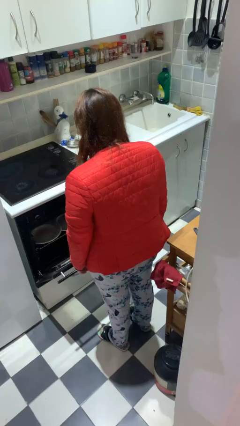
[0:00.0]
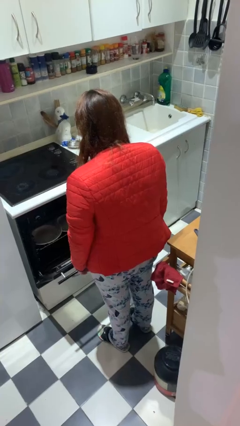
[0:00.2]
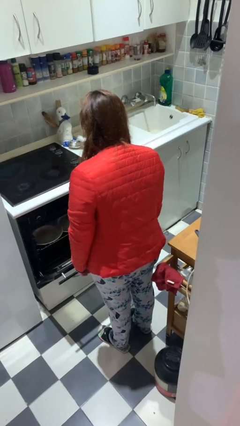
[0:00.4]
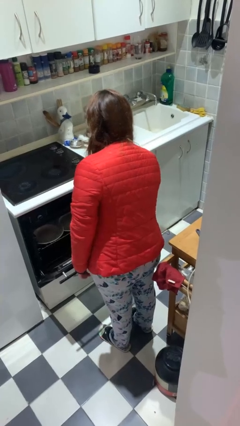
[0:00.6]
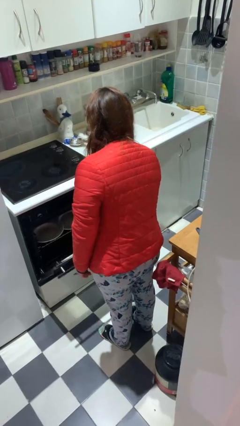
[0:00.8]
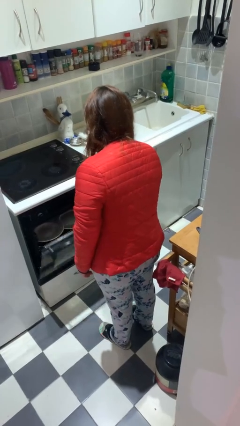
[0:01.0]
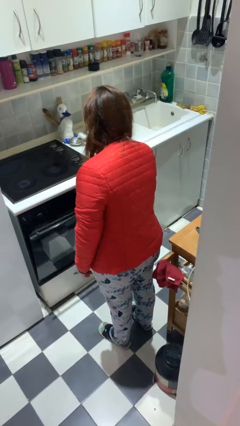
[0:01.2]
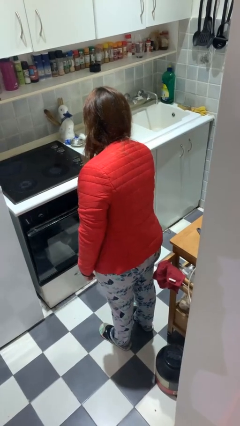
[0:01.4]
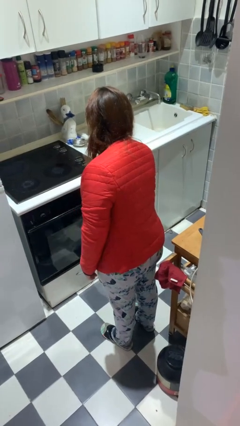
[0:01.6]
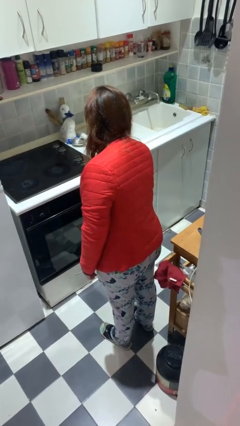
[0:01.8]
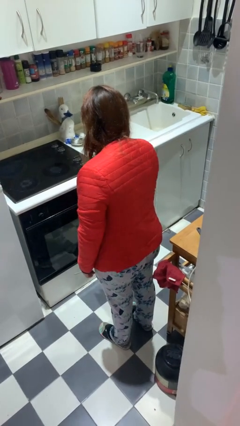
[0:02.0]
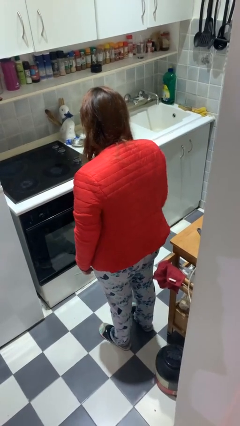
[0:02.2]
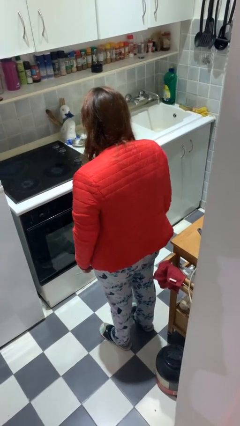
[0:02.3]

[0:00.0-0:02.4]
person closes dishwasher

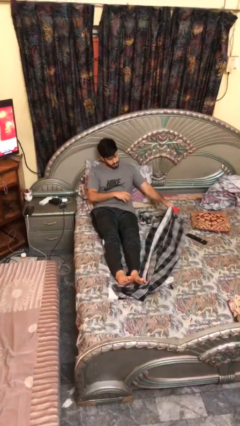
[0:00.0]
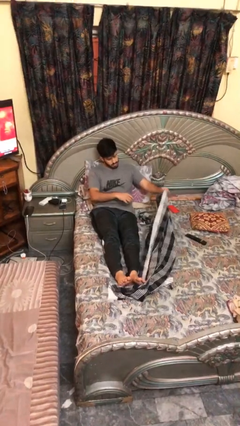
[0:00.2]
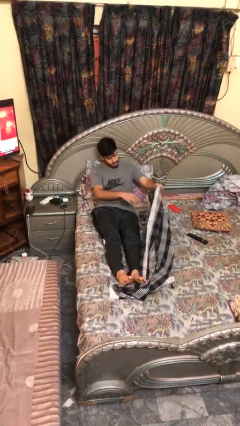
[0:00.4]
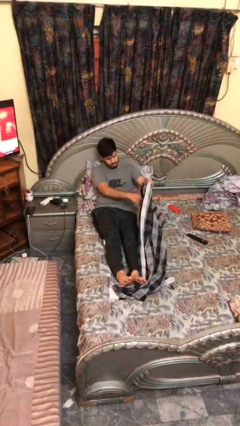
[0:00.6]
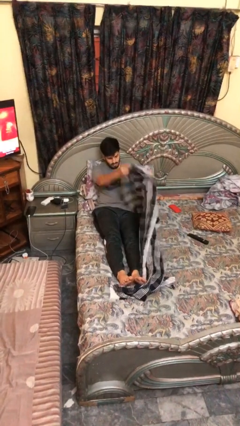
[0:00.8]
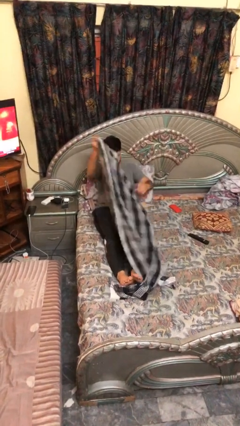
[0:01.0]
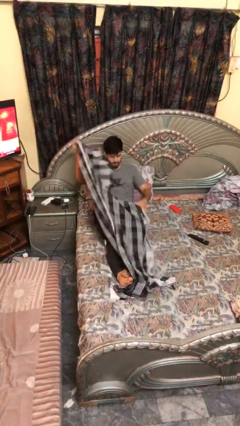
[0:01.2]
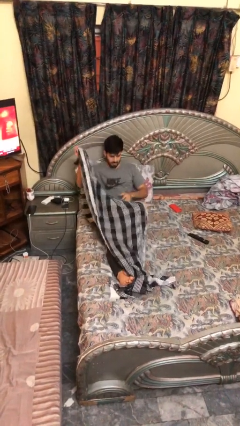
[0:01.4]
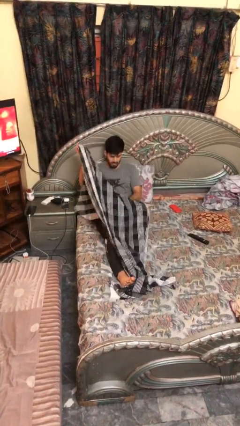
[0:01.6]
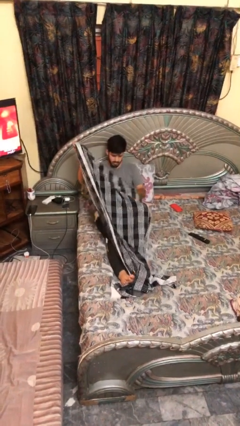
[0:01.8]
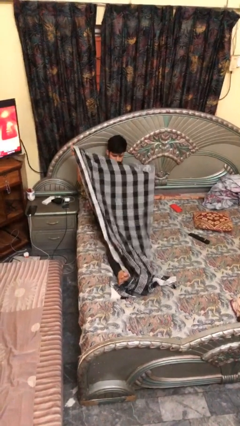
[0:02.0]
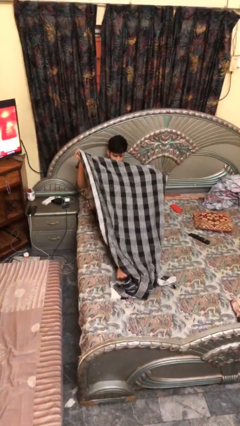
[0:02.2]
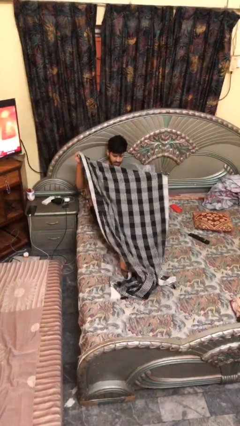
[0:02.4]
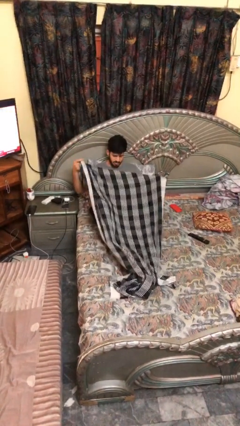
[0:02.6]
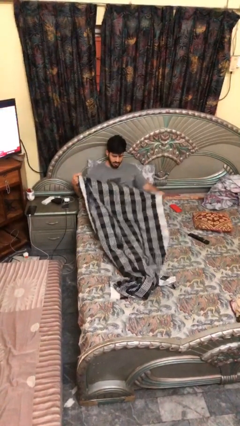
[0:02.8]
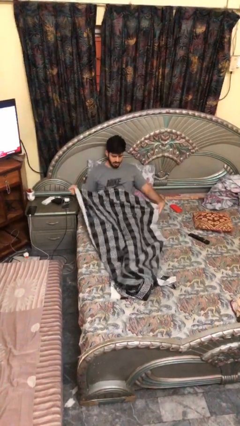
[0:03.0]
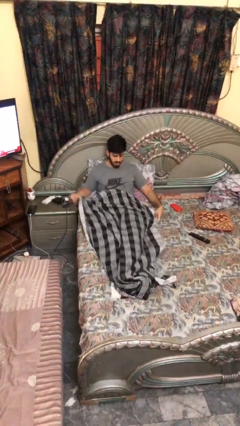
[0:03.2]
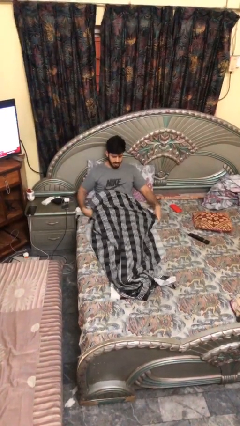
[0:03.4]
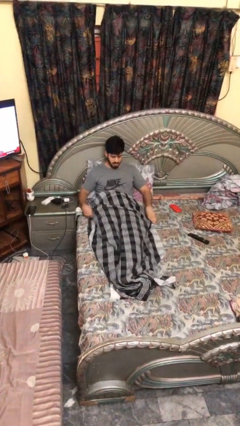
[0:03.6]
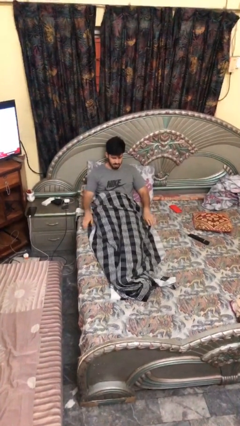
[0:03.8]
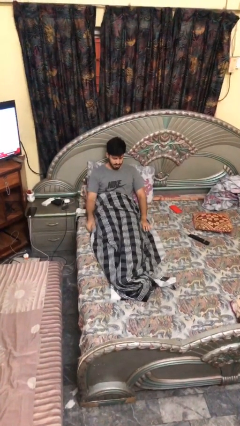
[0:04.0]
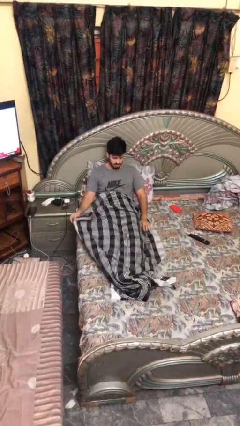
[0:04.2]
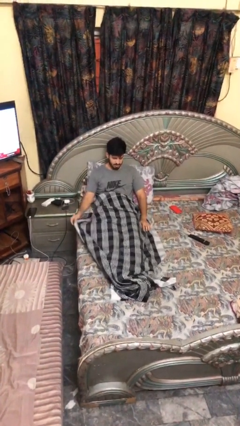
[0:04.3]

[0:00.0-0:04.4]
person covers with bedsheets

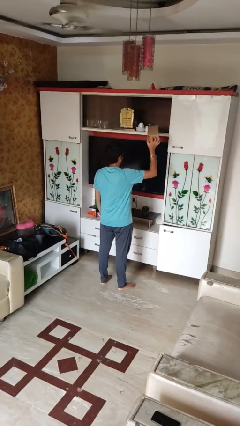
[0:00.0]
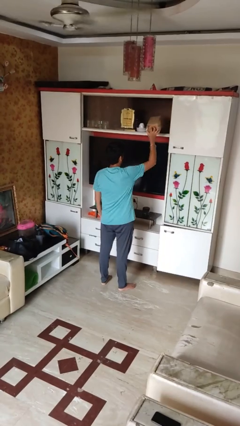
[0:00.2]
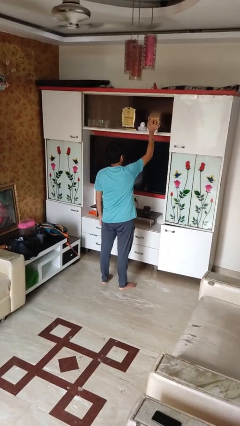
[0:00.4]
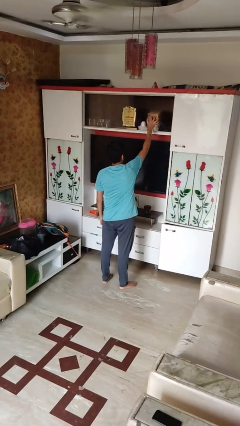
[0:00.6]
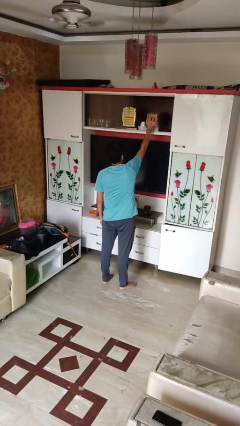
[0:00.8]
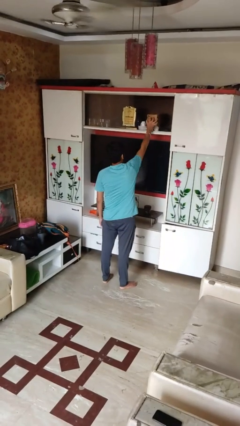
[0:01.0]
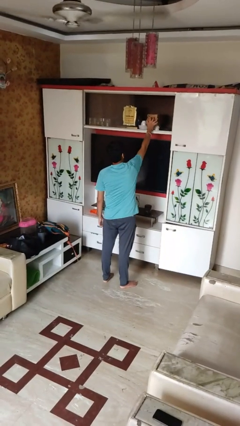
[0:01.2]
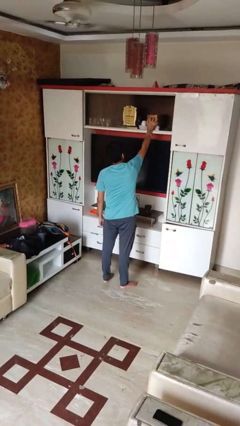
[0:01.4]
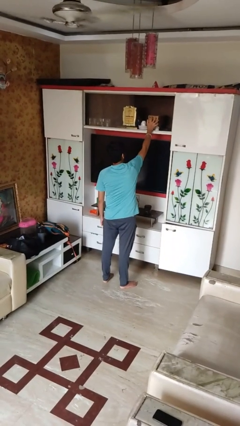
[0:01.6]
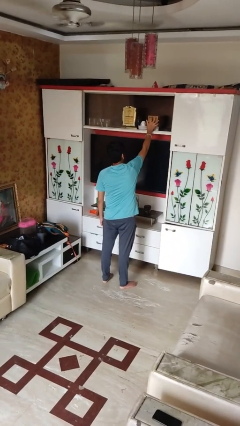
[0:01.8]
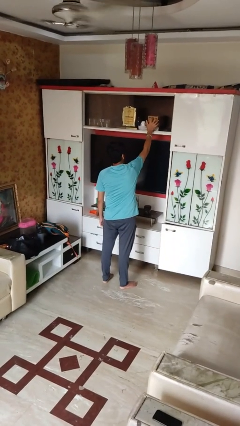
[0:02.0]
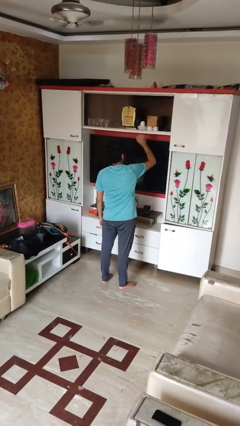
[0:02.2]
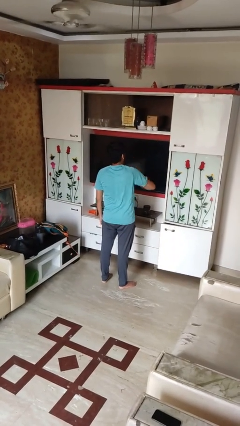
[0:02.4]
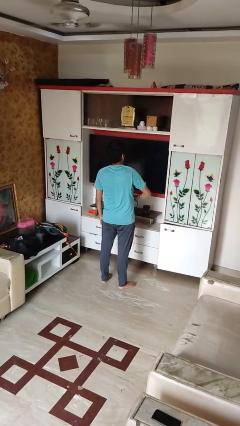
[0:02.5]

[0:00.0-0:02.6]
person puts down object on shelf

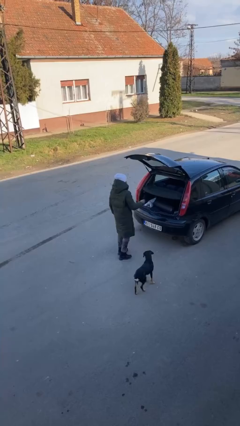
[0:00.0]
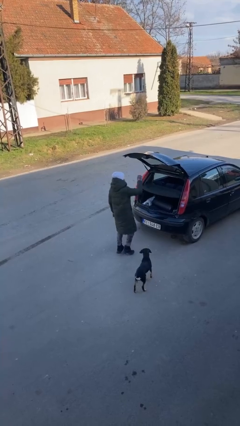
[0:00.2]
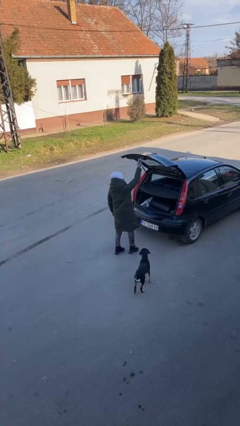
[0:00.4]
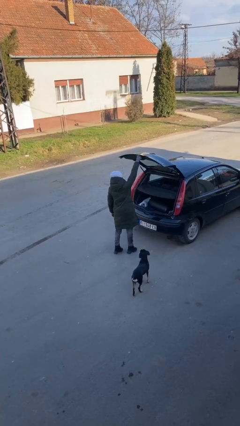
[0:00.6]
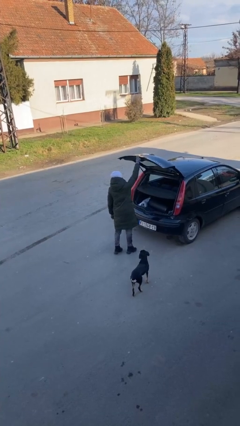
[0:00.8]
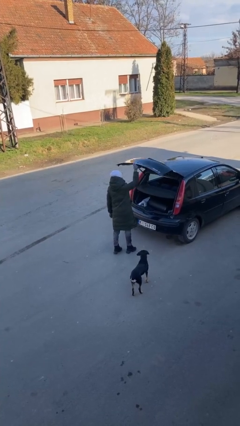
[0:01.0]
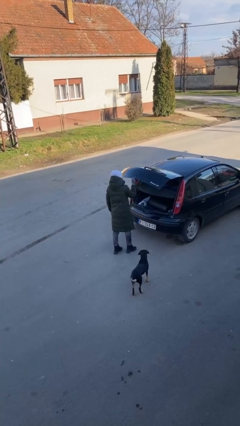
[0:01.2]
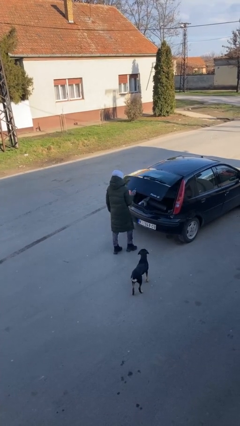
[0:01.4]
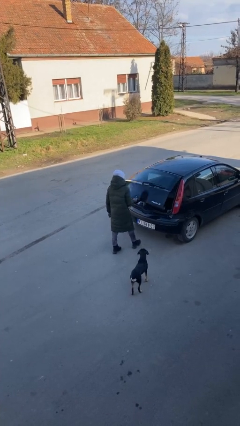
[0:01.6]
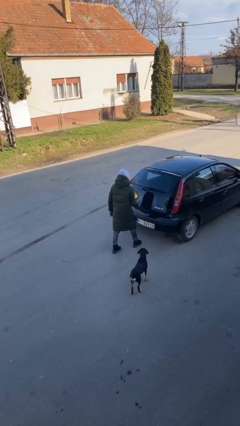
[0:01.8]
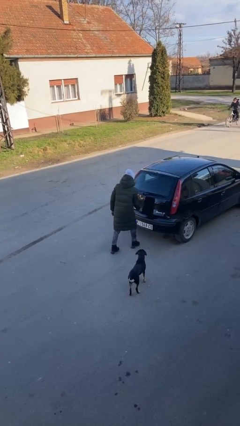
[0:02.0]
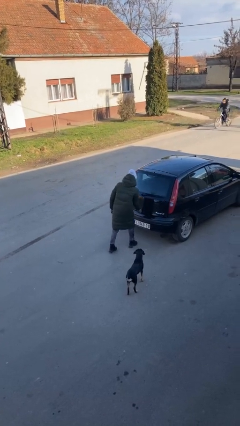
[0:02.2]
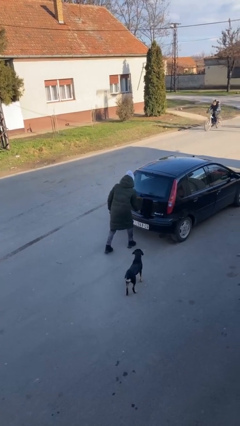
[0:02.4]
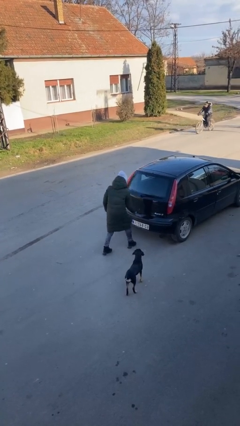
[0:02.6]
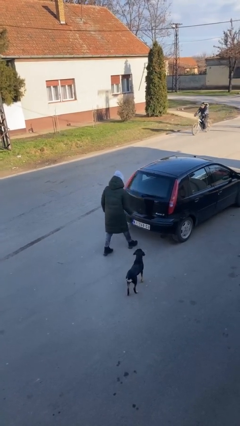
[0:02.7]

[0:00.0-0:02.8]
person closes car trunk

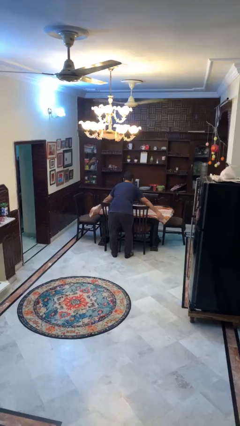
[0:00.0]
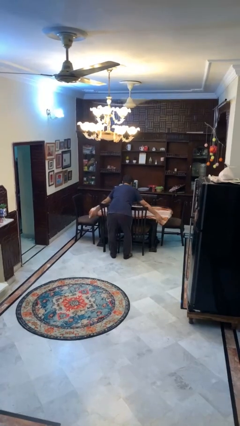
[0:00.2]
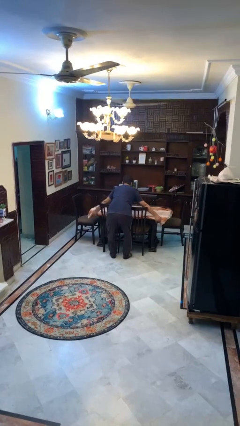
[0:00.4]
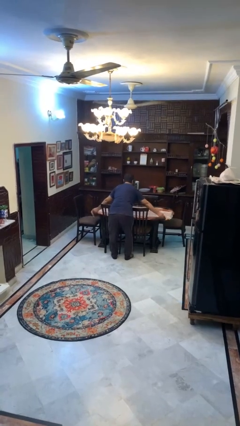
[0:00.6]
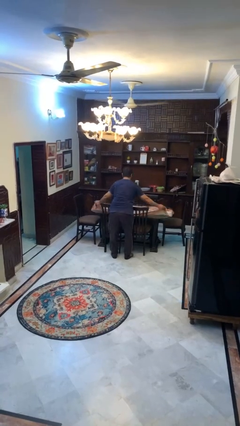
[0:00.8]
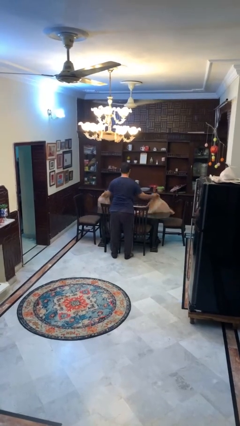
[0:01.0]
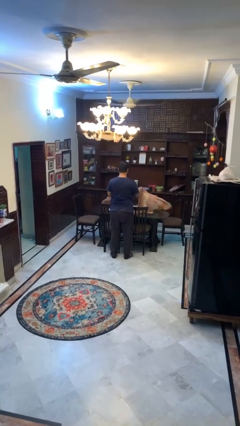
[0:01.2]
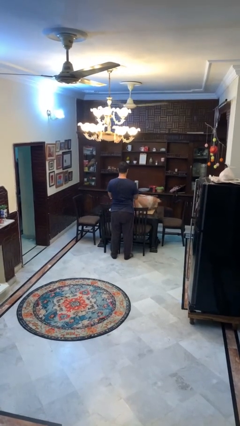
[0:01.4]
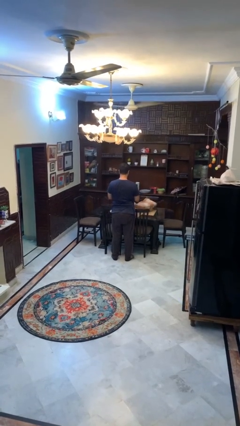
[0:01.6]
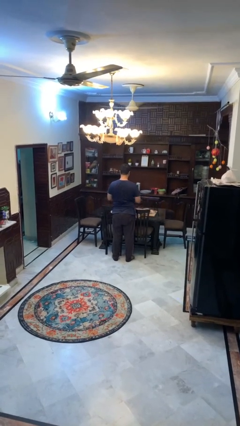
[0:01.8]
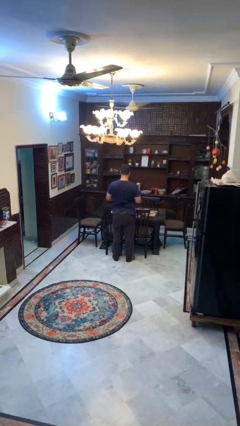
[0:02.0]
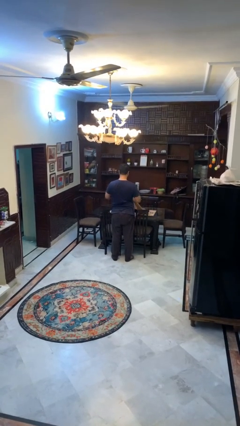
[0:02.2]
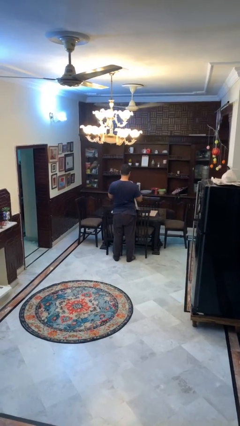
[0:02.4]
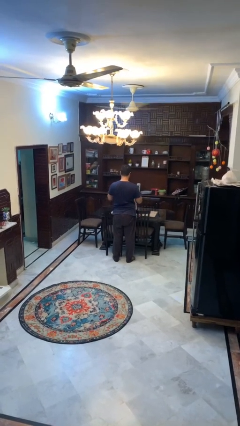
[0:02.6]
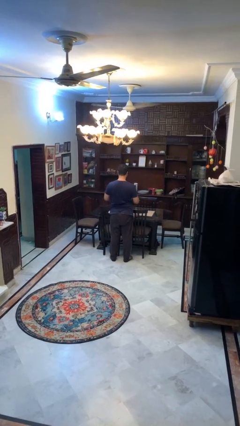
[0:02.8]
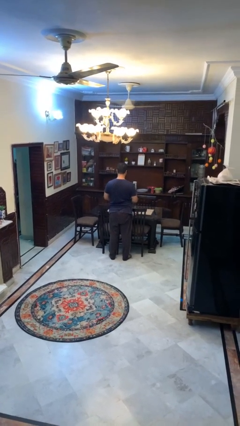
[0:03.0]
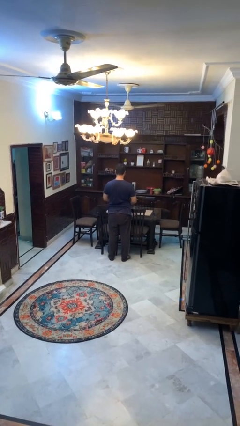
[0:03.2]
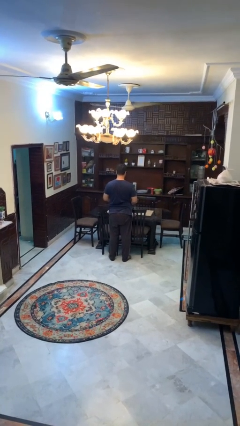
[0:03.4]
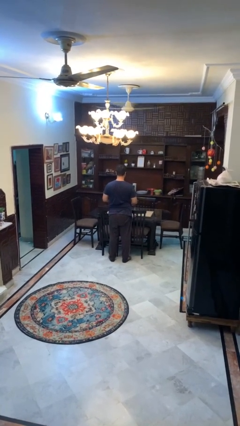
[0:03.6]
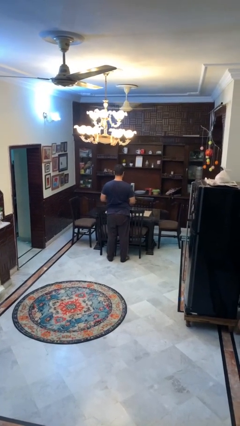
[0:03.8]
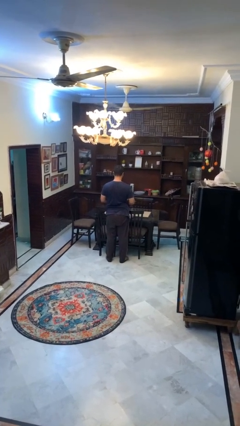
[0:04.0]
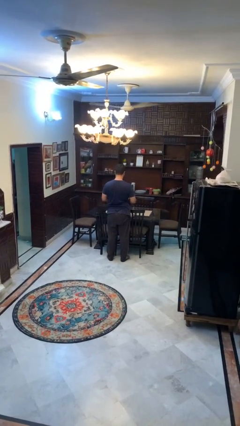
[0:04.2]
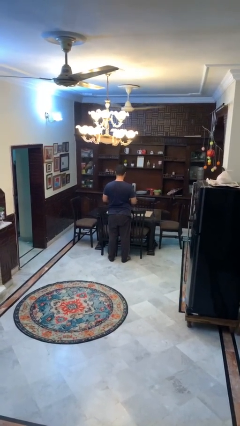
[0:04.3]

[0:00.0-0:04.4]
person folds tablecloth

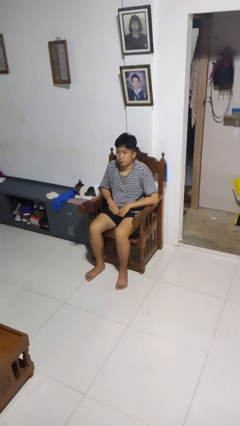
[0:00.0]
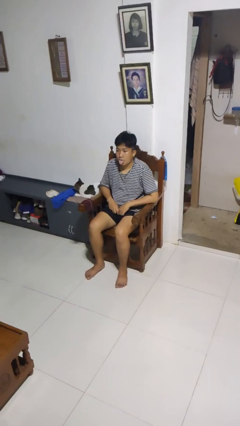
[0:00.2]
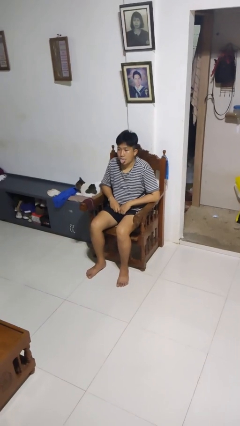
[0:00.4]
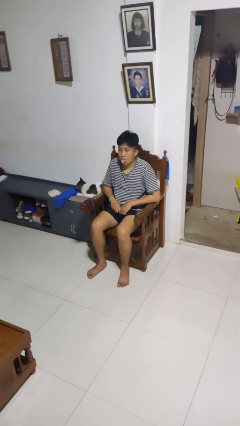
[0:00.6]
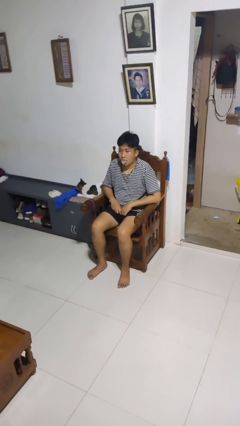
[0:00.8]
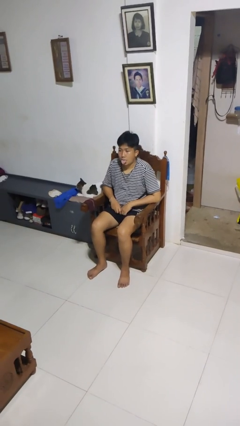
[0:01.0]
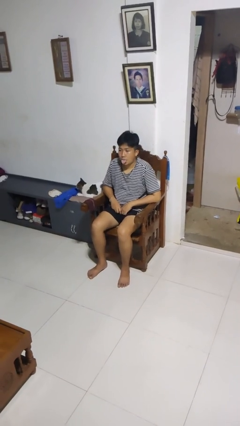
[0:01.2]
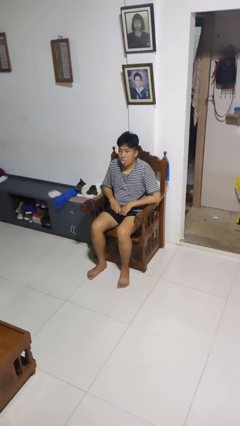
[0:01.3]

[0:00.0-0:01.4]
person sticks out tongue
